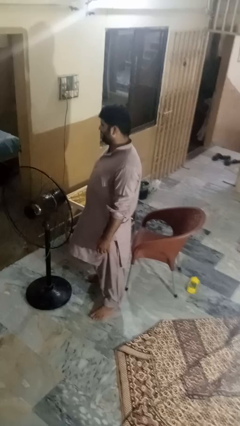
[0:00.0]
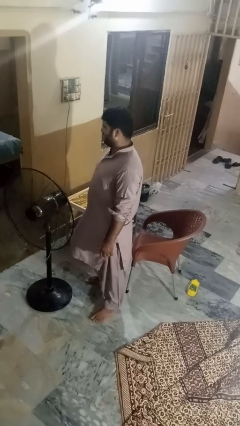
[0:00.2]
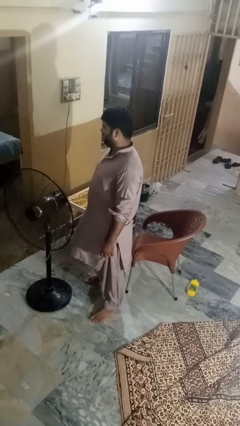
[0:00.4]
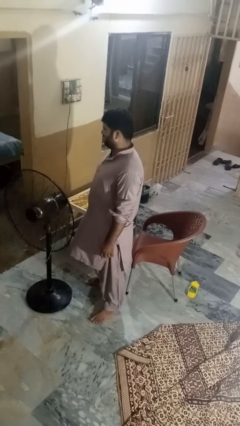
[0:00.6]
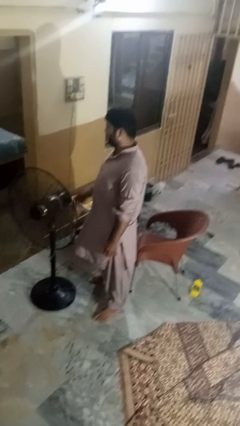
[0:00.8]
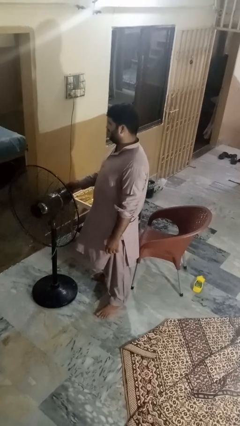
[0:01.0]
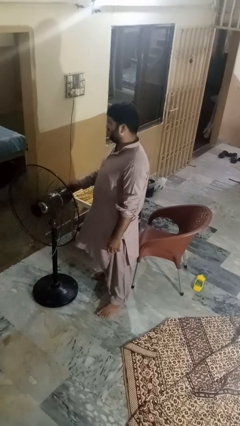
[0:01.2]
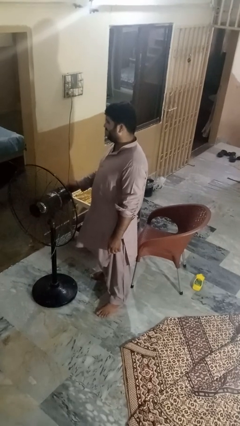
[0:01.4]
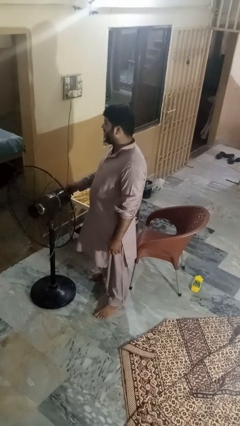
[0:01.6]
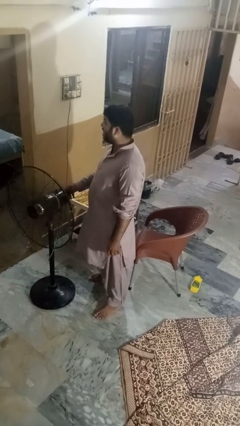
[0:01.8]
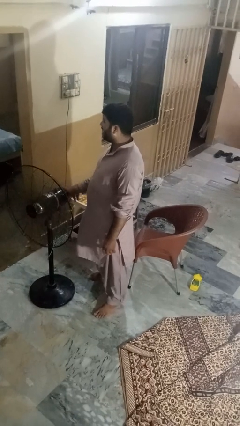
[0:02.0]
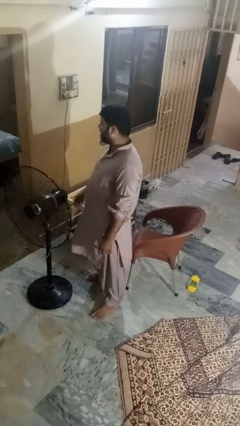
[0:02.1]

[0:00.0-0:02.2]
person turns on fan

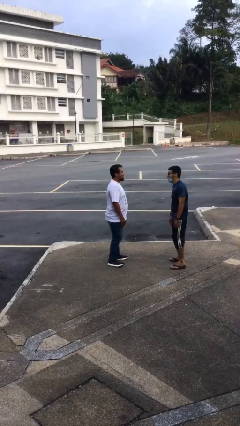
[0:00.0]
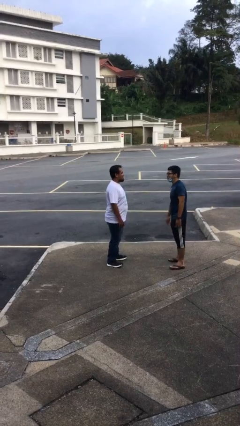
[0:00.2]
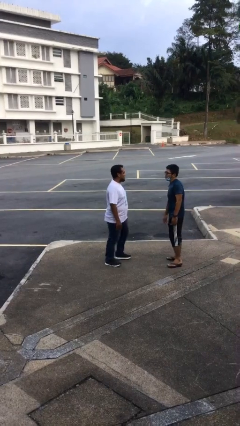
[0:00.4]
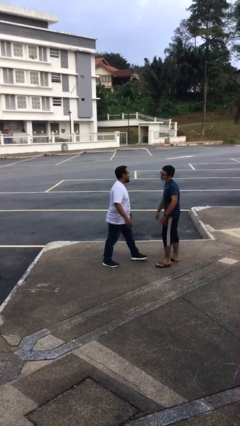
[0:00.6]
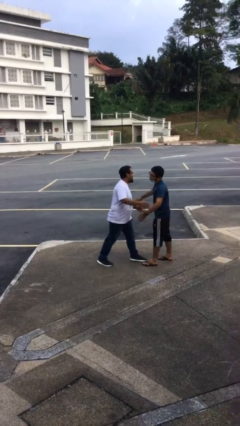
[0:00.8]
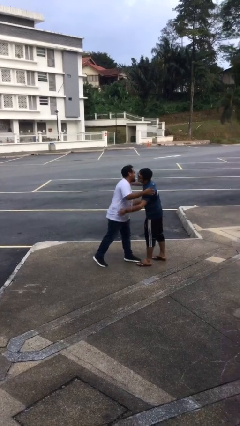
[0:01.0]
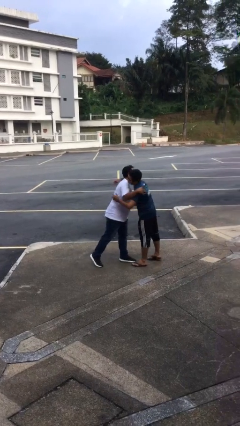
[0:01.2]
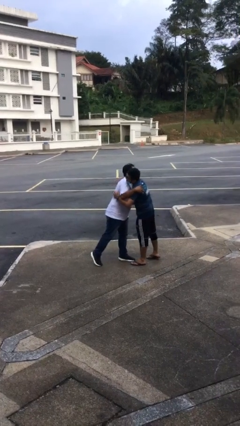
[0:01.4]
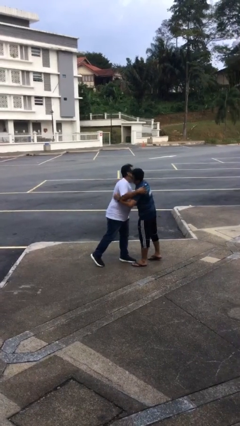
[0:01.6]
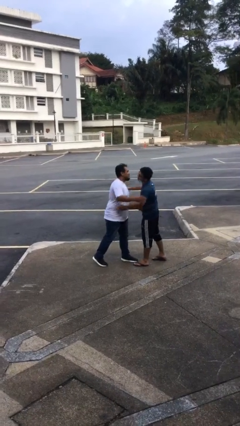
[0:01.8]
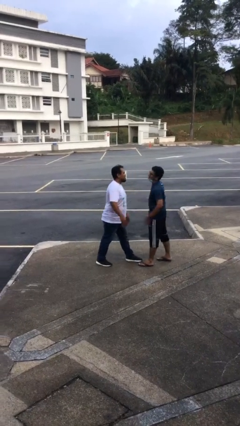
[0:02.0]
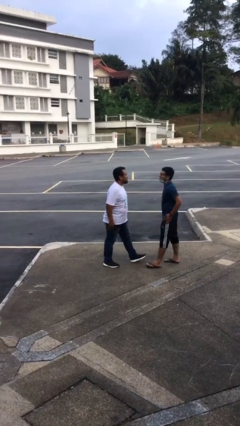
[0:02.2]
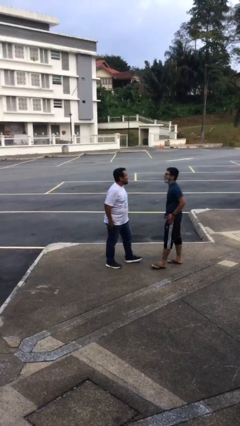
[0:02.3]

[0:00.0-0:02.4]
person embraces person

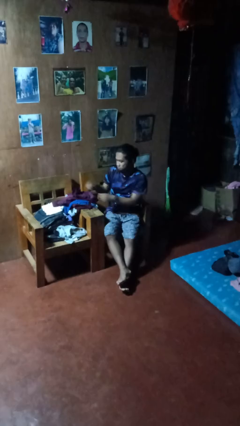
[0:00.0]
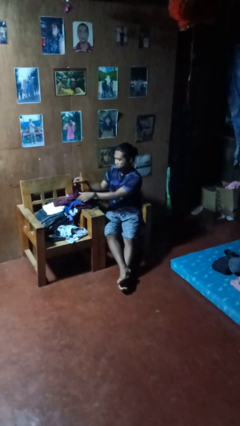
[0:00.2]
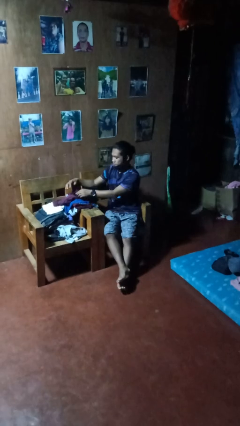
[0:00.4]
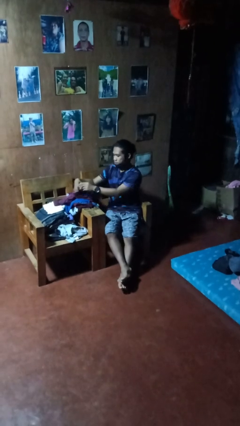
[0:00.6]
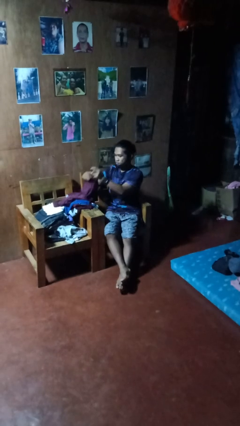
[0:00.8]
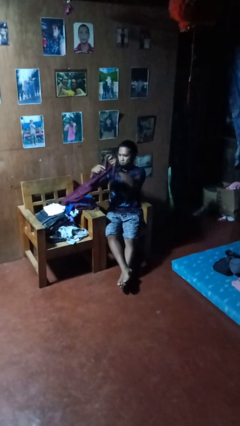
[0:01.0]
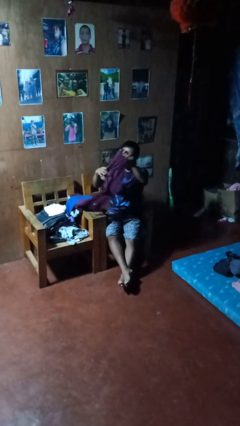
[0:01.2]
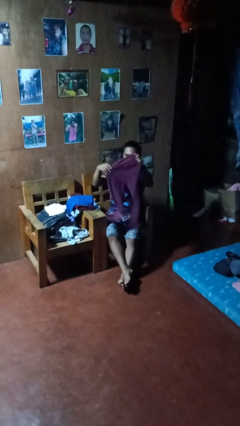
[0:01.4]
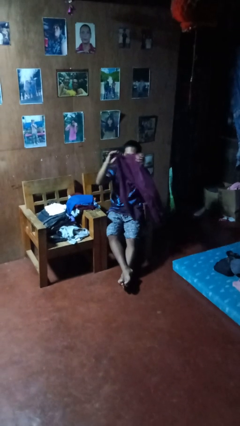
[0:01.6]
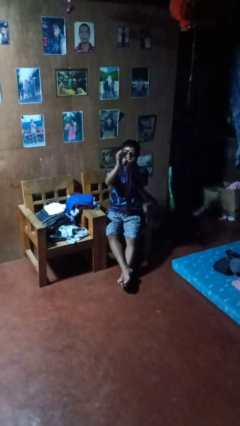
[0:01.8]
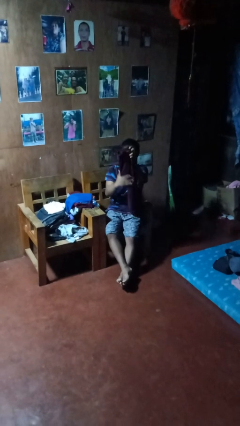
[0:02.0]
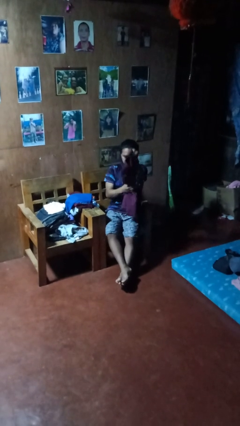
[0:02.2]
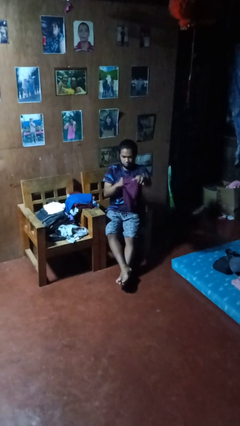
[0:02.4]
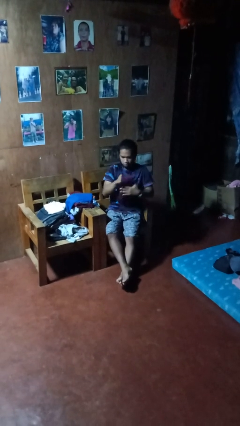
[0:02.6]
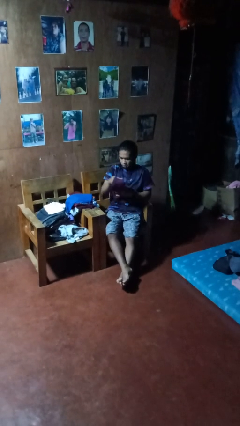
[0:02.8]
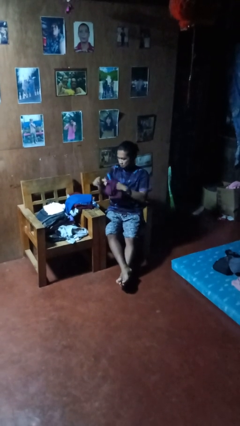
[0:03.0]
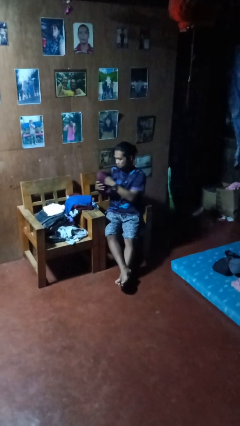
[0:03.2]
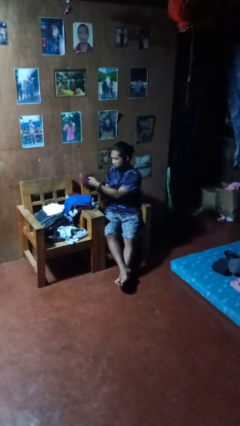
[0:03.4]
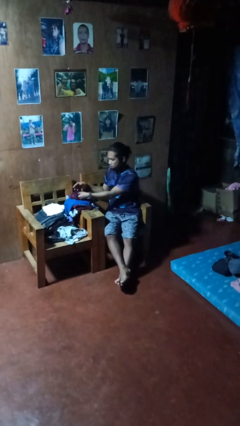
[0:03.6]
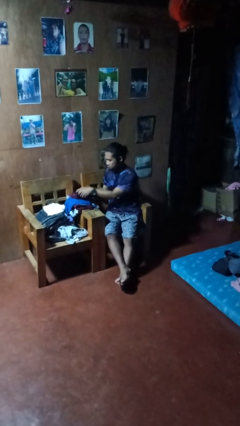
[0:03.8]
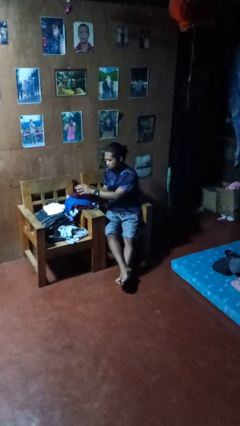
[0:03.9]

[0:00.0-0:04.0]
person folds pants

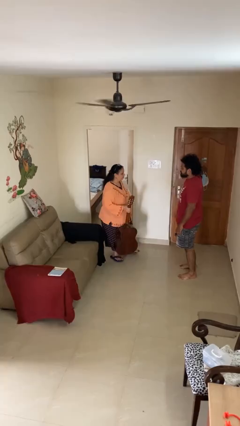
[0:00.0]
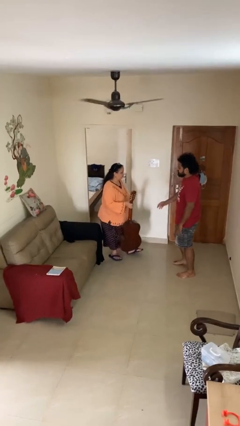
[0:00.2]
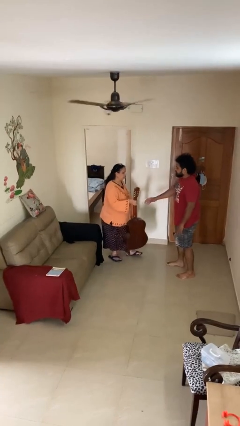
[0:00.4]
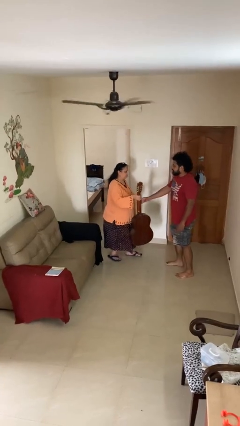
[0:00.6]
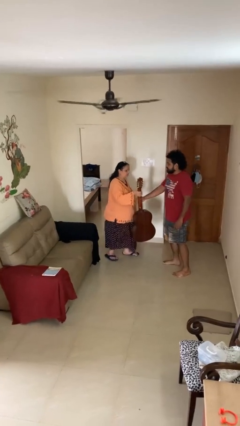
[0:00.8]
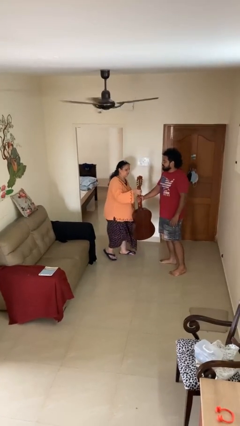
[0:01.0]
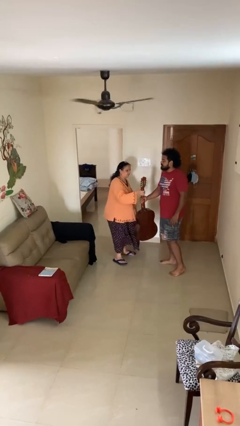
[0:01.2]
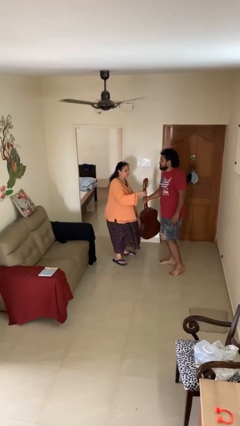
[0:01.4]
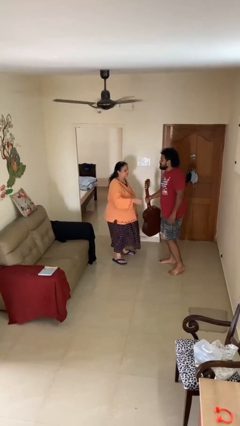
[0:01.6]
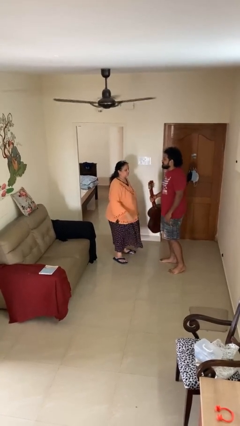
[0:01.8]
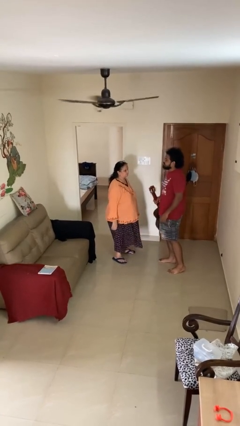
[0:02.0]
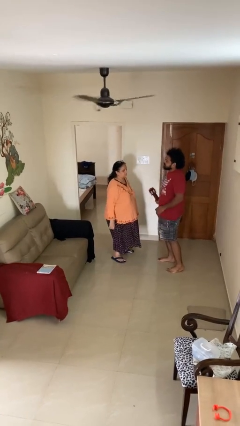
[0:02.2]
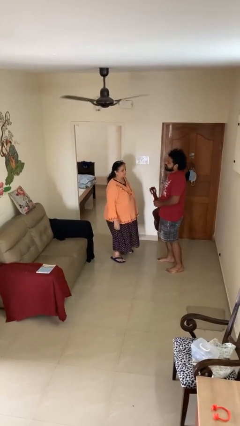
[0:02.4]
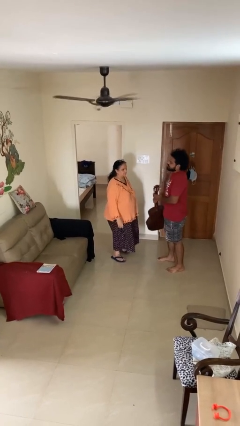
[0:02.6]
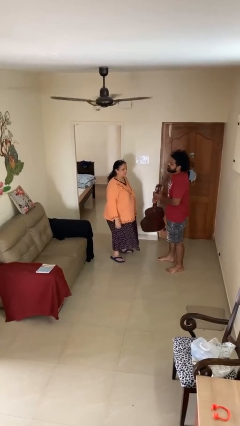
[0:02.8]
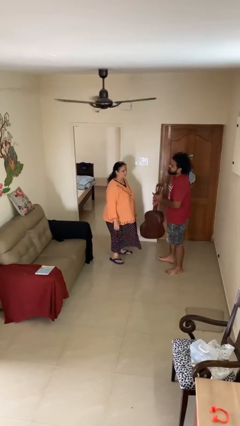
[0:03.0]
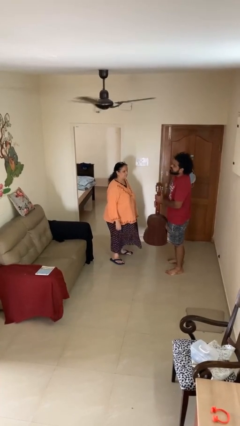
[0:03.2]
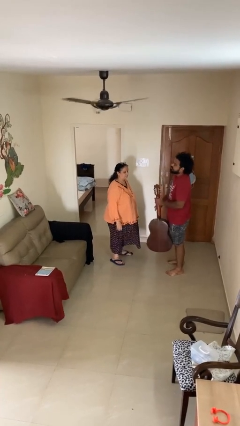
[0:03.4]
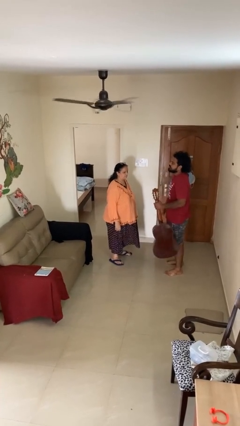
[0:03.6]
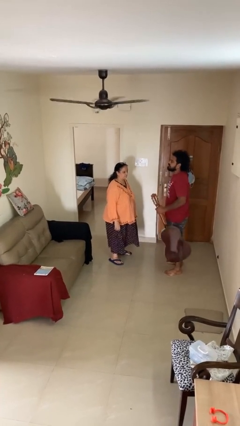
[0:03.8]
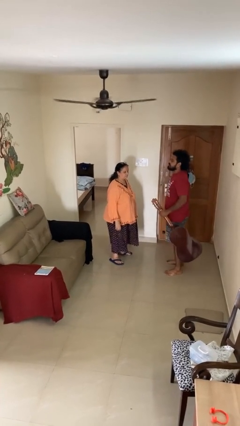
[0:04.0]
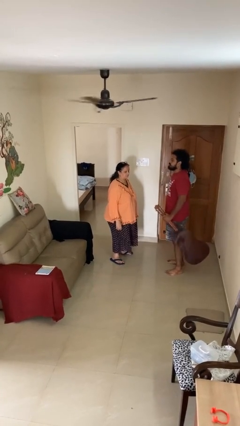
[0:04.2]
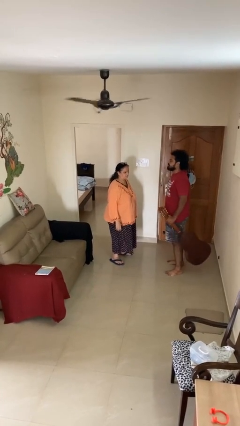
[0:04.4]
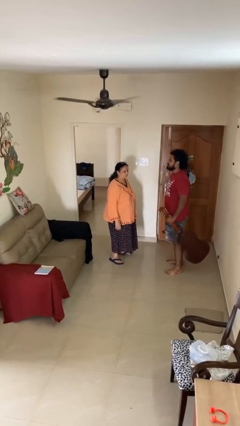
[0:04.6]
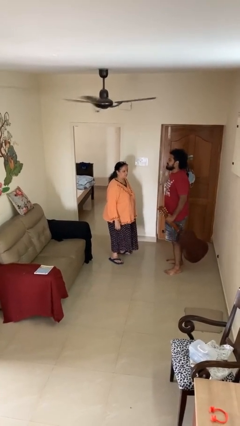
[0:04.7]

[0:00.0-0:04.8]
person transfers object to person

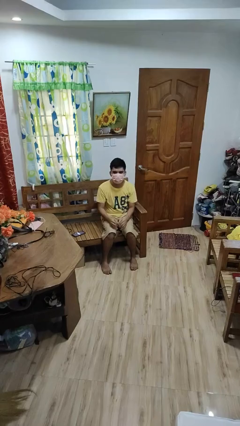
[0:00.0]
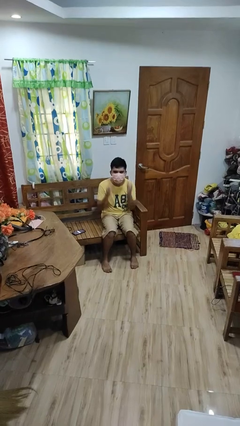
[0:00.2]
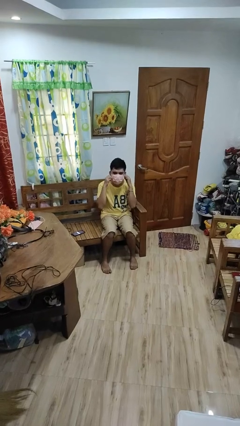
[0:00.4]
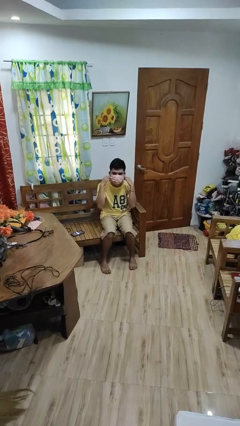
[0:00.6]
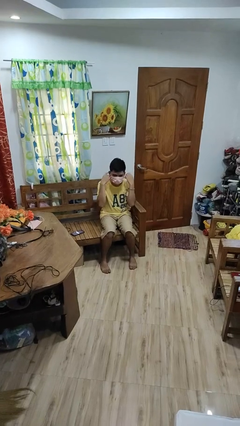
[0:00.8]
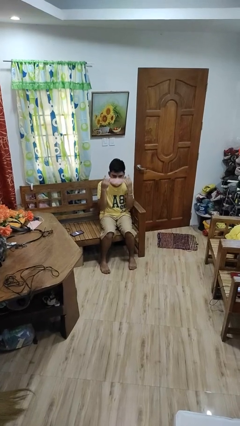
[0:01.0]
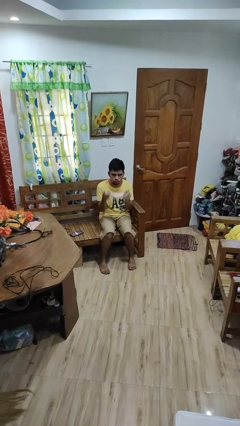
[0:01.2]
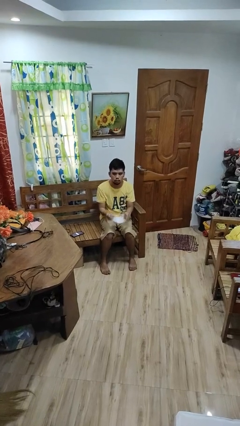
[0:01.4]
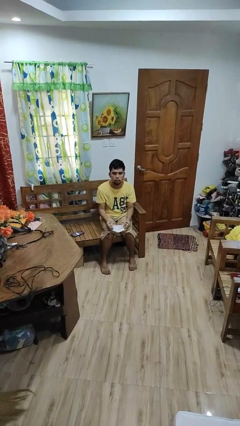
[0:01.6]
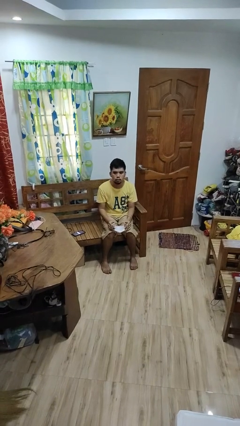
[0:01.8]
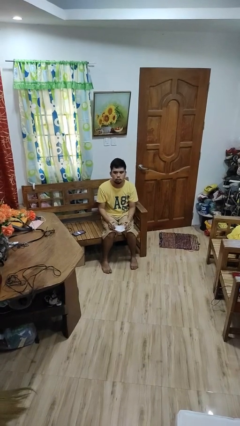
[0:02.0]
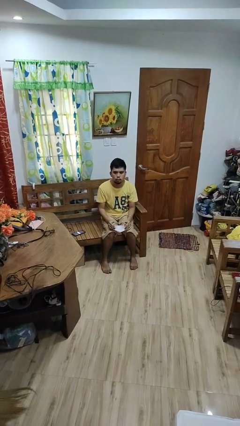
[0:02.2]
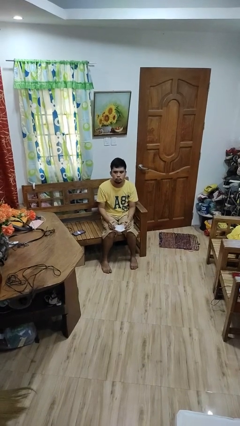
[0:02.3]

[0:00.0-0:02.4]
person takes off facemask

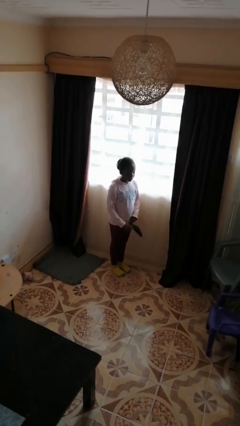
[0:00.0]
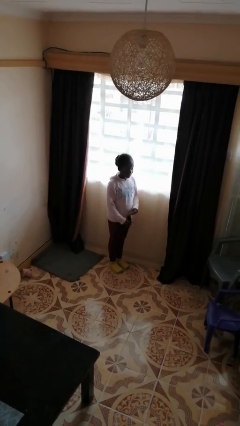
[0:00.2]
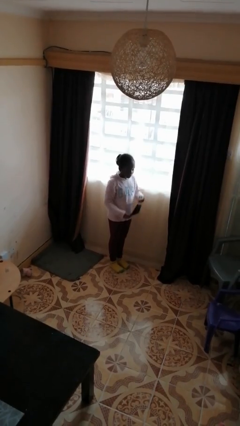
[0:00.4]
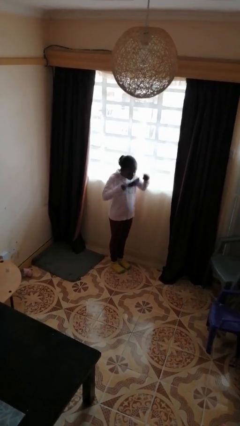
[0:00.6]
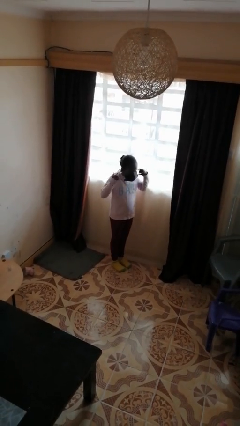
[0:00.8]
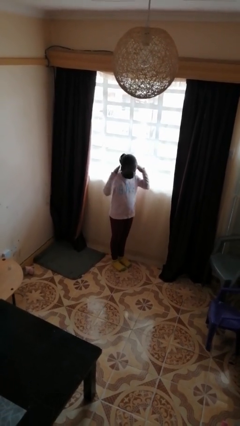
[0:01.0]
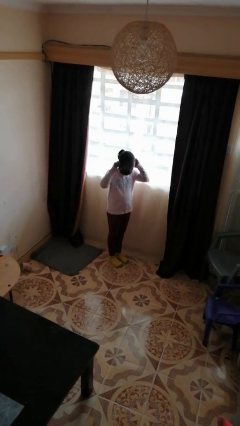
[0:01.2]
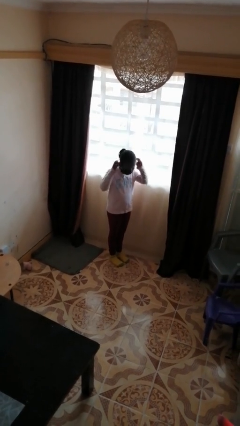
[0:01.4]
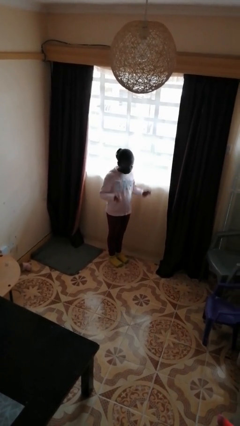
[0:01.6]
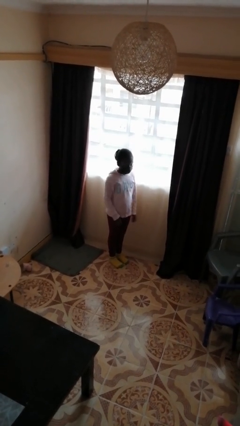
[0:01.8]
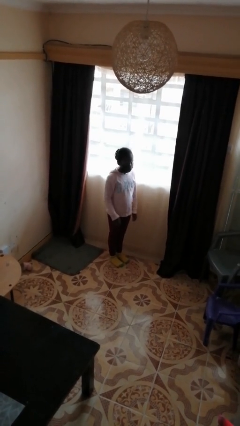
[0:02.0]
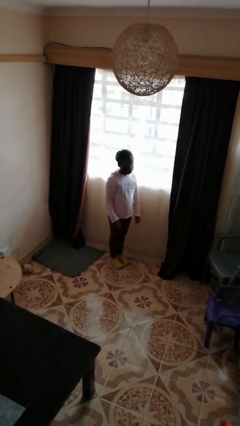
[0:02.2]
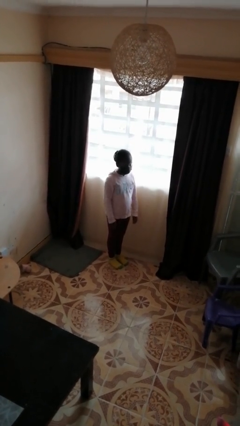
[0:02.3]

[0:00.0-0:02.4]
person puts on facemask
